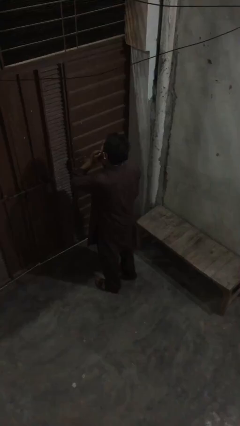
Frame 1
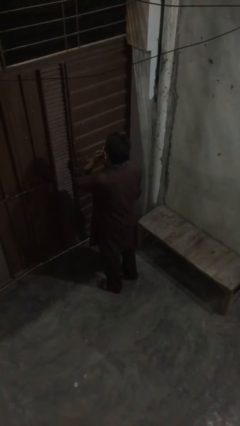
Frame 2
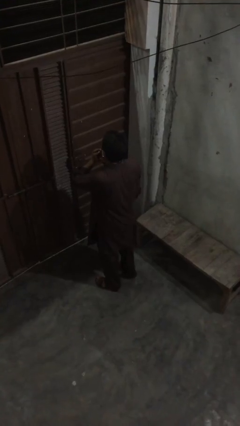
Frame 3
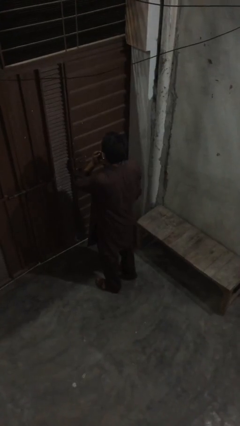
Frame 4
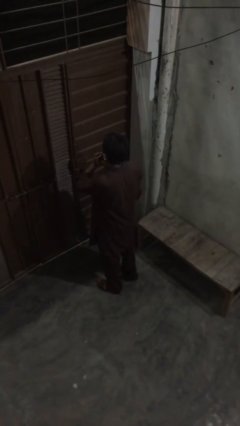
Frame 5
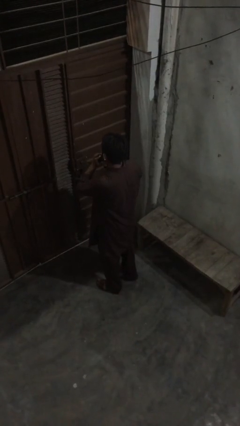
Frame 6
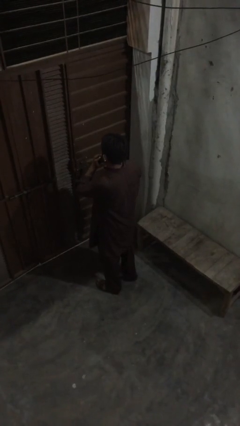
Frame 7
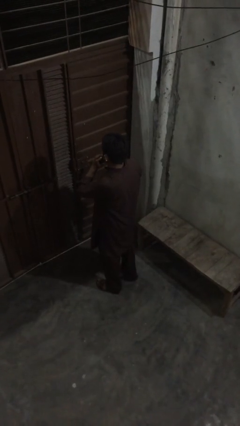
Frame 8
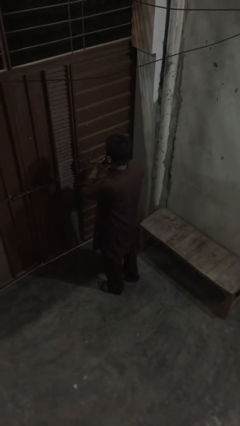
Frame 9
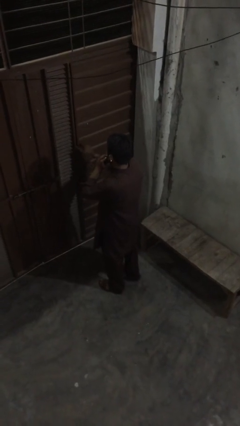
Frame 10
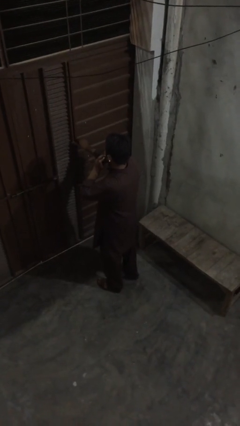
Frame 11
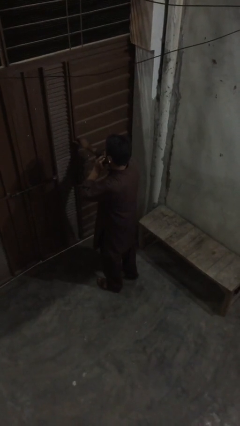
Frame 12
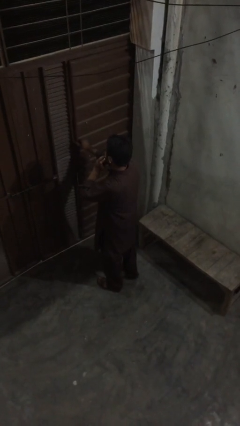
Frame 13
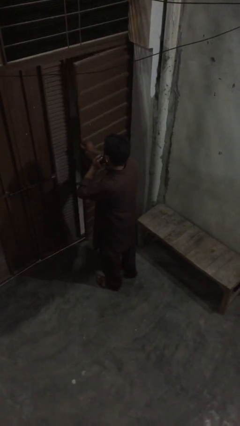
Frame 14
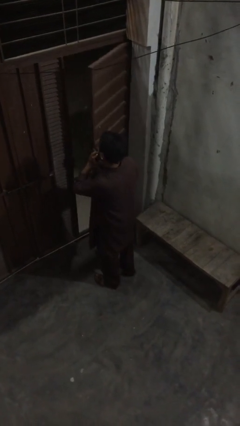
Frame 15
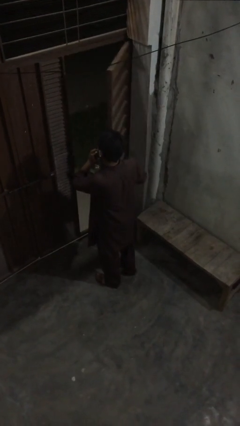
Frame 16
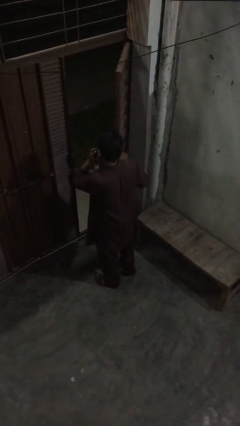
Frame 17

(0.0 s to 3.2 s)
person opens facility door

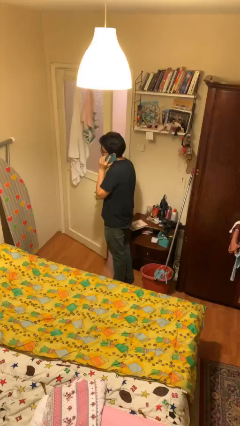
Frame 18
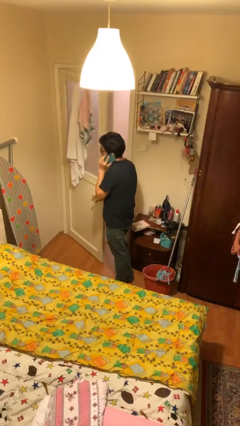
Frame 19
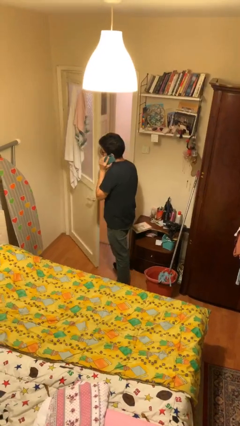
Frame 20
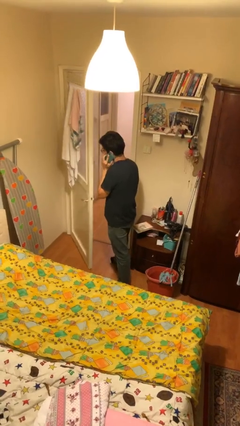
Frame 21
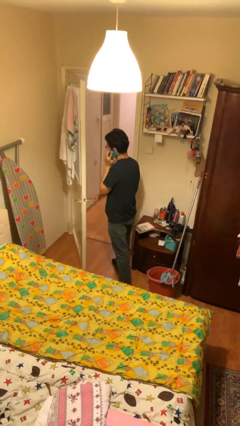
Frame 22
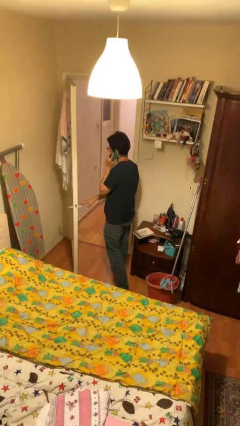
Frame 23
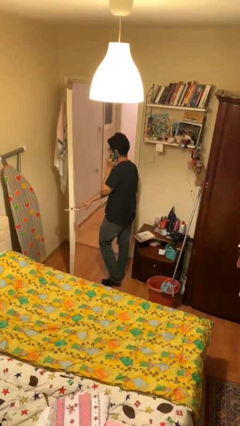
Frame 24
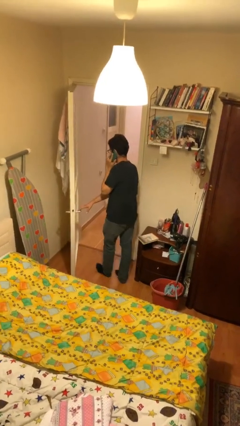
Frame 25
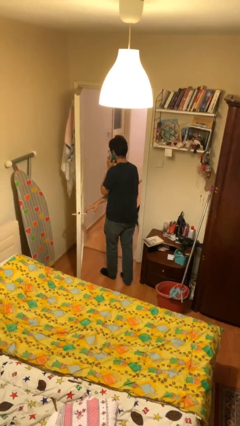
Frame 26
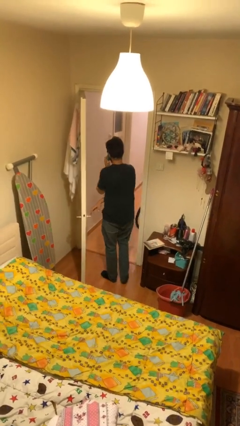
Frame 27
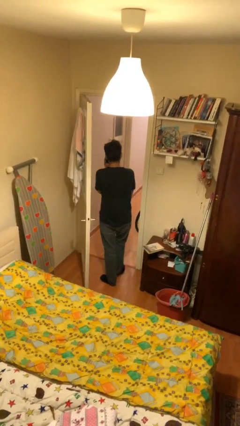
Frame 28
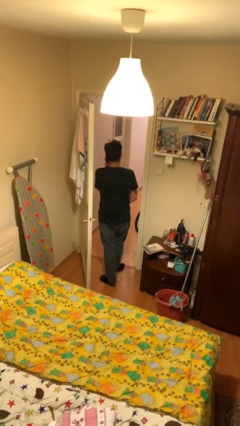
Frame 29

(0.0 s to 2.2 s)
person exits scene through structure

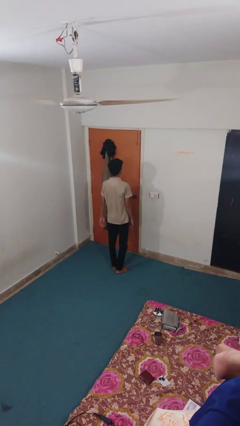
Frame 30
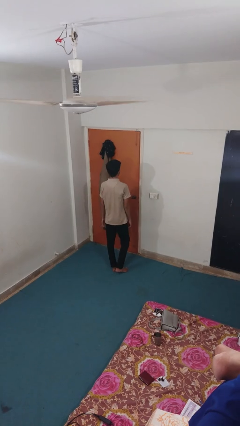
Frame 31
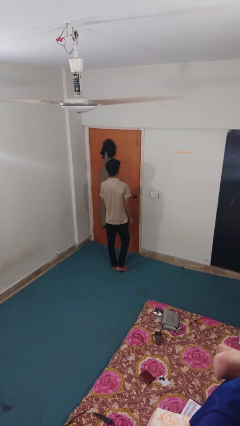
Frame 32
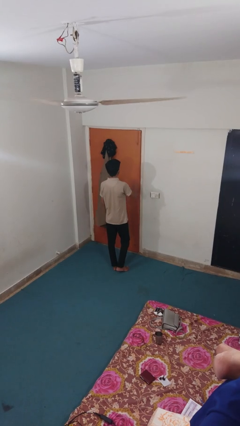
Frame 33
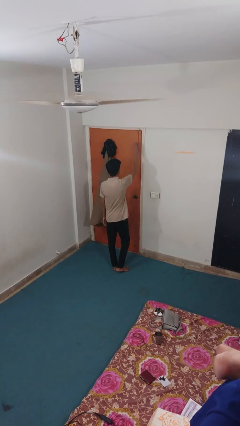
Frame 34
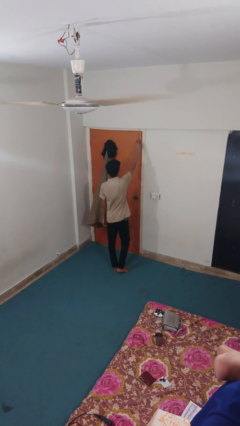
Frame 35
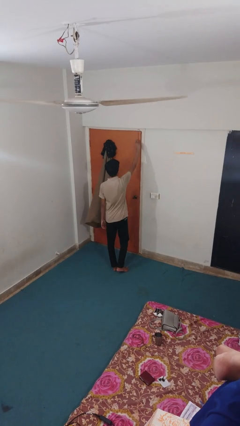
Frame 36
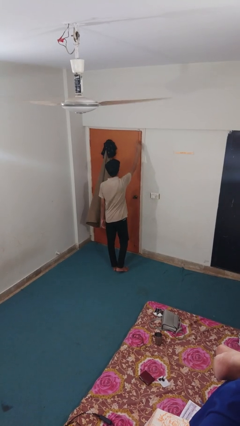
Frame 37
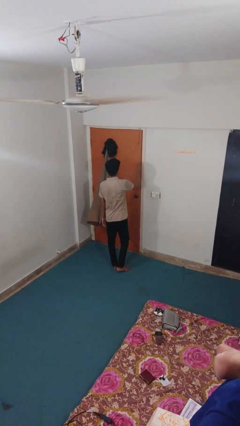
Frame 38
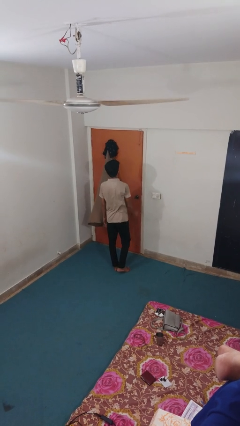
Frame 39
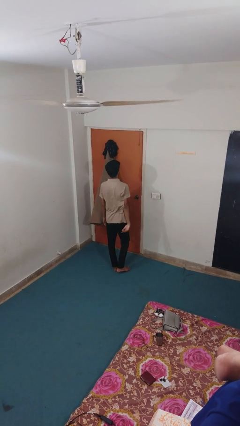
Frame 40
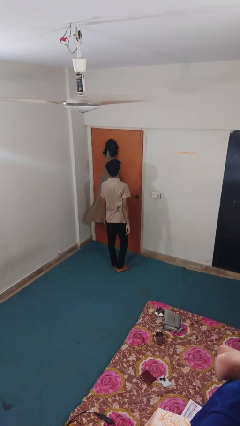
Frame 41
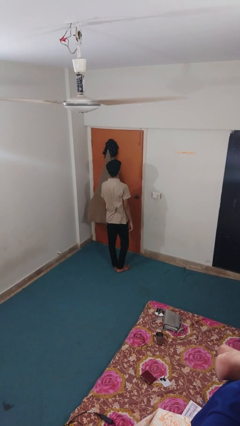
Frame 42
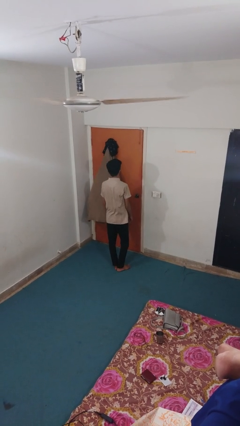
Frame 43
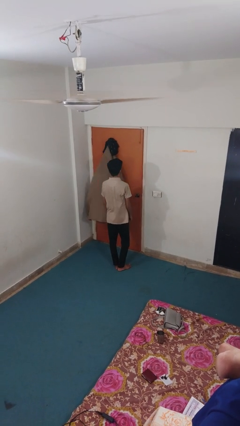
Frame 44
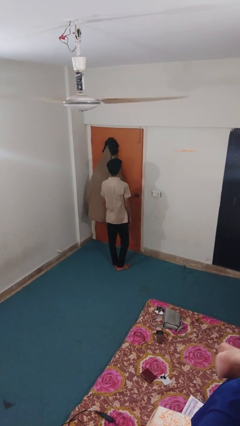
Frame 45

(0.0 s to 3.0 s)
person locks door with keys

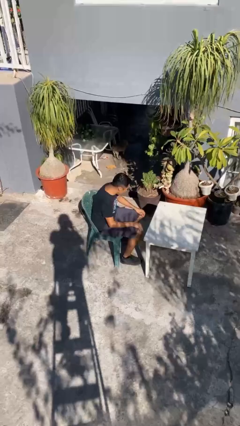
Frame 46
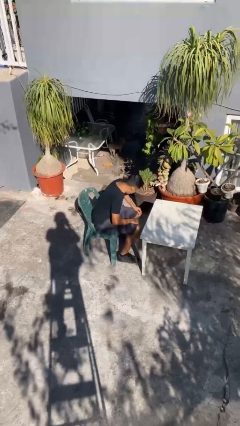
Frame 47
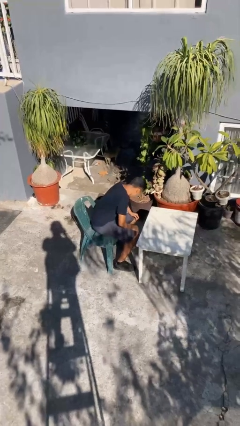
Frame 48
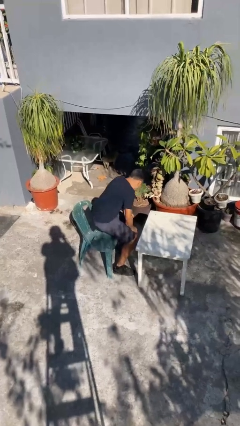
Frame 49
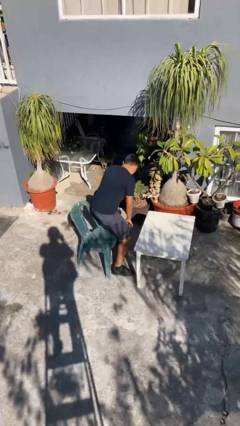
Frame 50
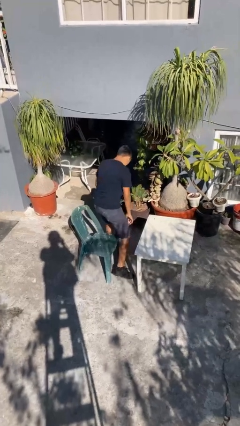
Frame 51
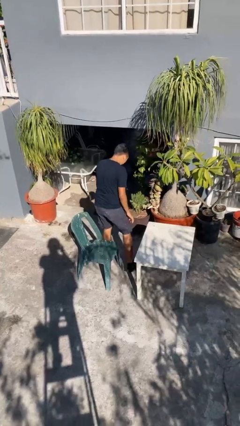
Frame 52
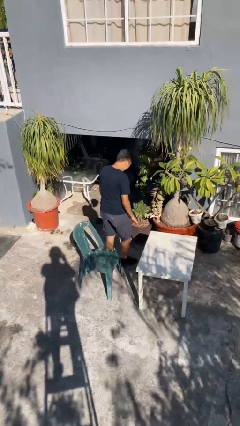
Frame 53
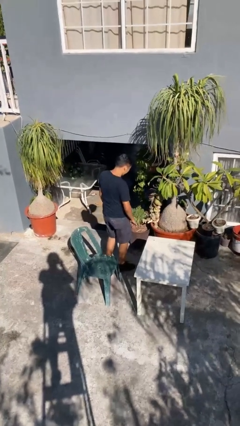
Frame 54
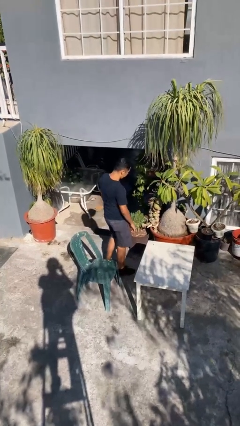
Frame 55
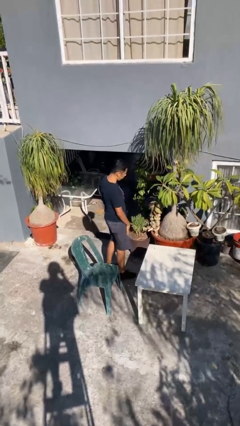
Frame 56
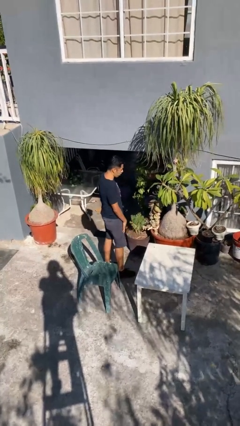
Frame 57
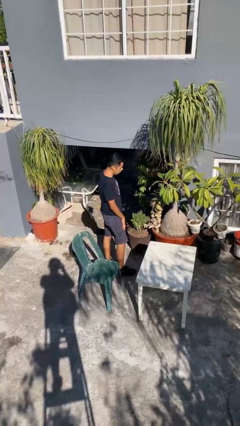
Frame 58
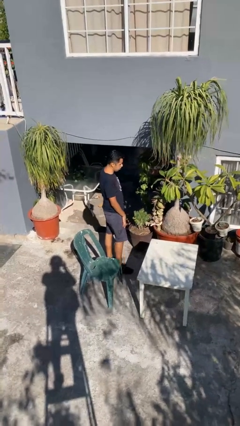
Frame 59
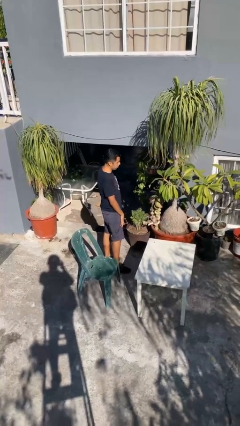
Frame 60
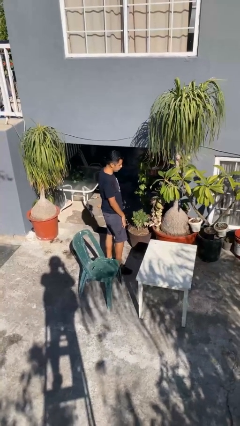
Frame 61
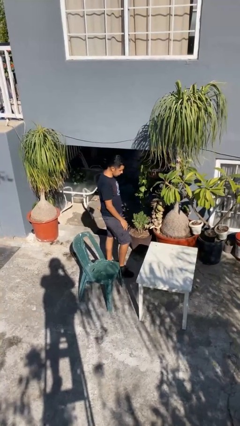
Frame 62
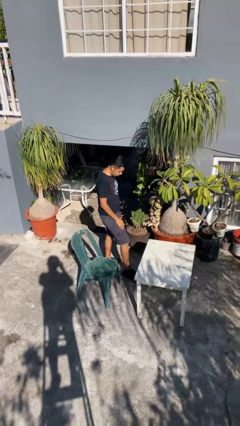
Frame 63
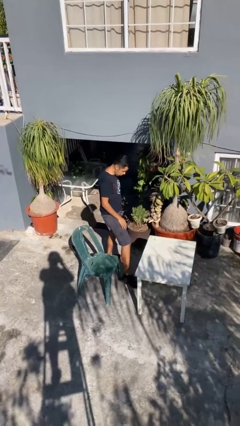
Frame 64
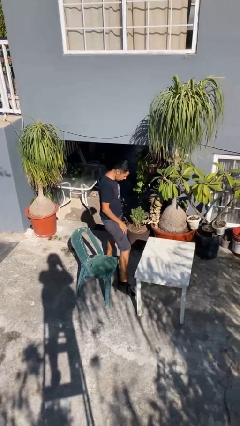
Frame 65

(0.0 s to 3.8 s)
person stands up

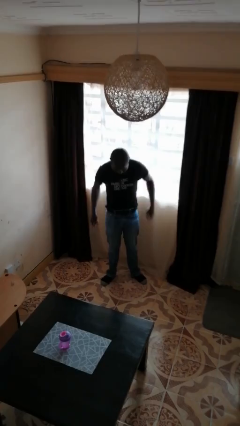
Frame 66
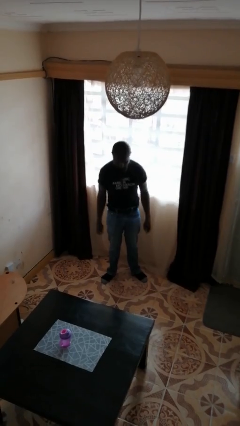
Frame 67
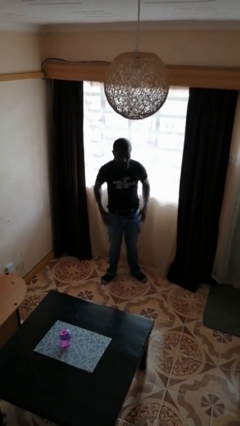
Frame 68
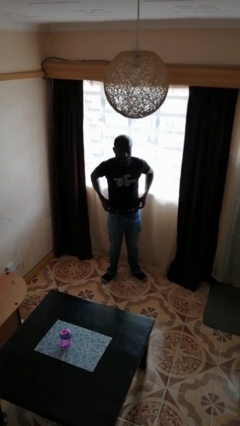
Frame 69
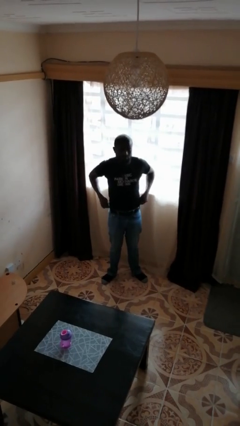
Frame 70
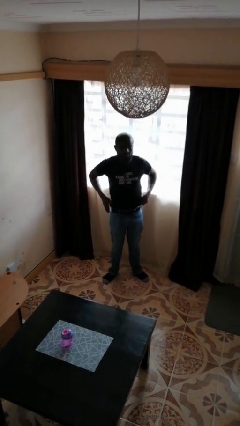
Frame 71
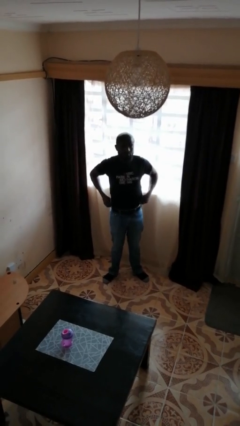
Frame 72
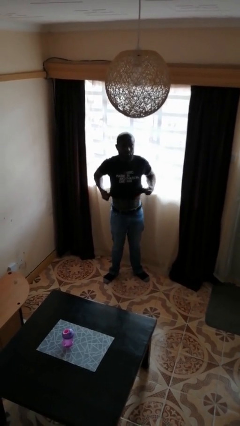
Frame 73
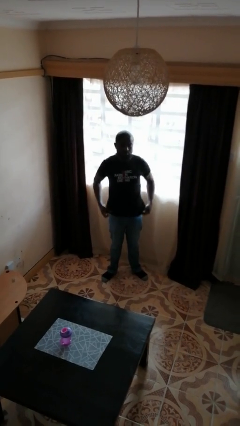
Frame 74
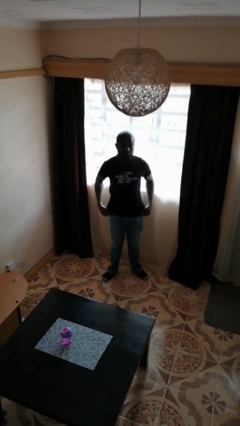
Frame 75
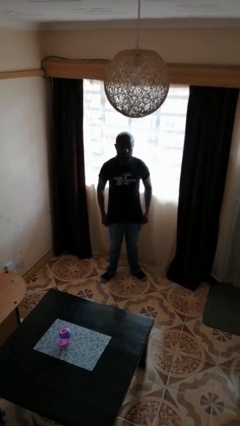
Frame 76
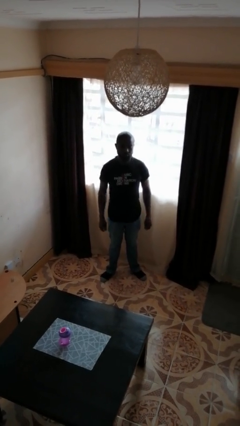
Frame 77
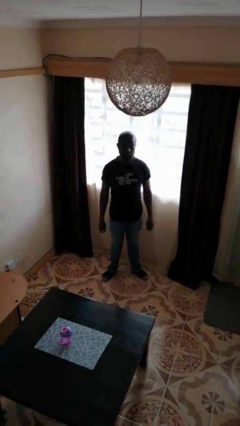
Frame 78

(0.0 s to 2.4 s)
person untucks shirt

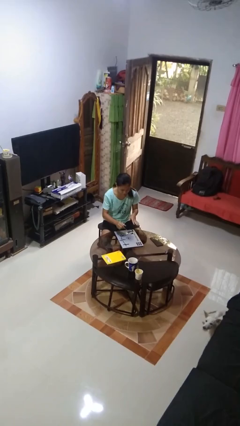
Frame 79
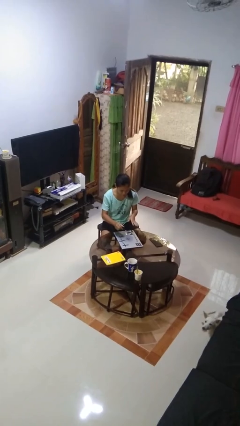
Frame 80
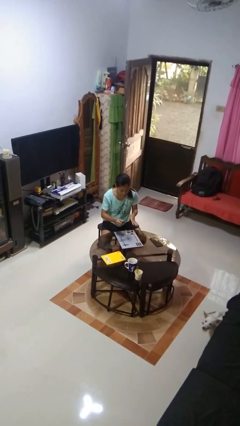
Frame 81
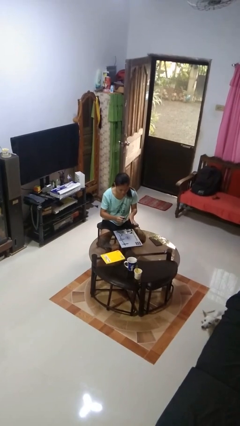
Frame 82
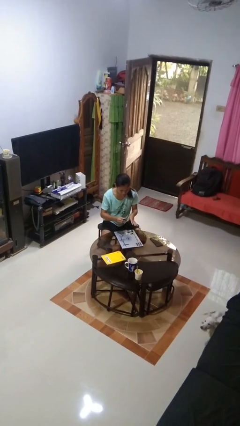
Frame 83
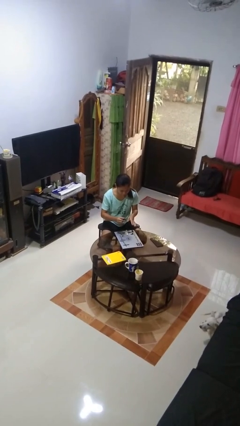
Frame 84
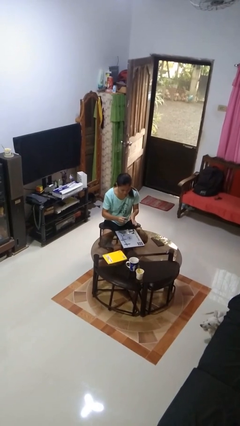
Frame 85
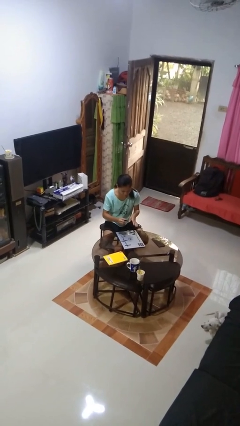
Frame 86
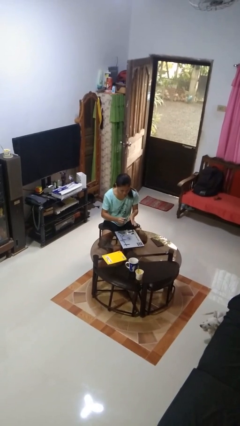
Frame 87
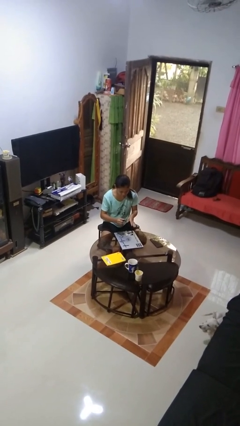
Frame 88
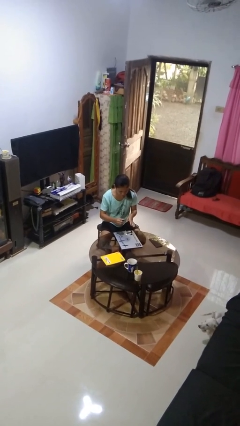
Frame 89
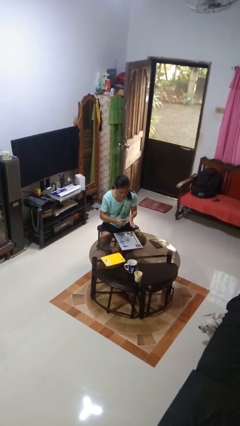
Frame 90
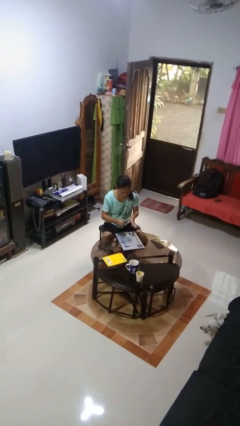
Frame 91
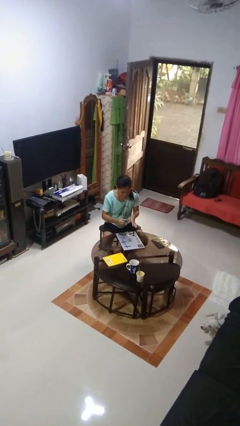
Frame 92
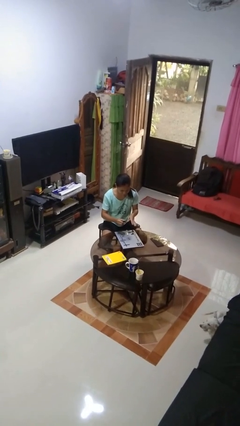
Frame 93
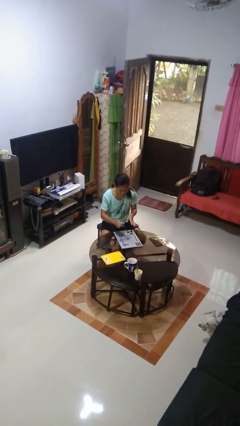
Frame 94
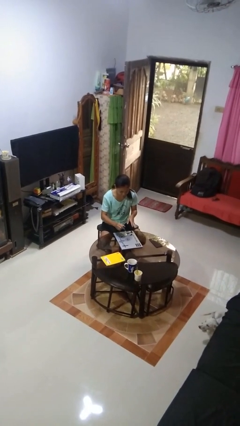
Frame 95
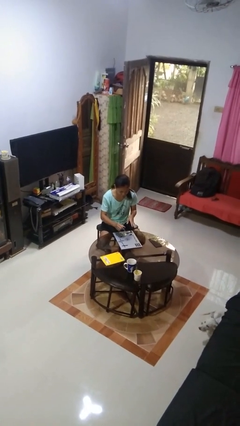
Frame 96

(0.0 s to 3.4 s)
person paints fingernails
